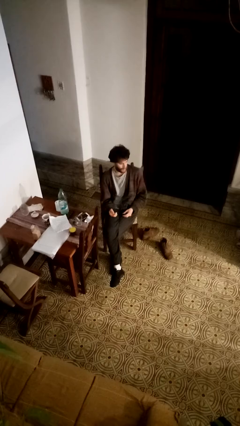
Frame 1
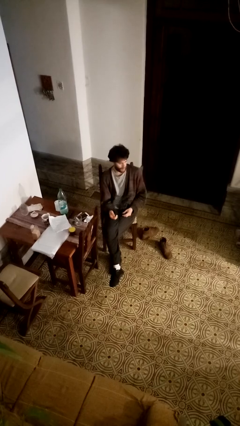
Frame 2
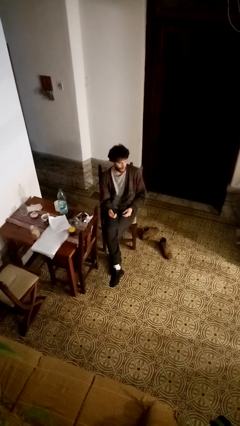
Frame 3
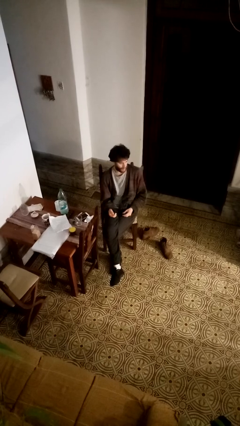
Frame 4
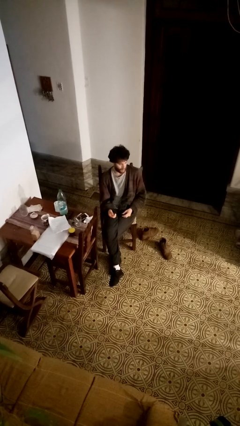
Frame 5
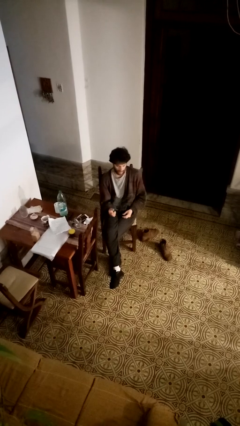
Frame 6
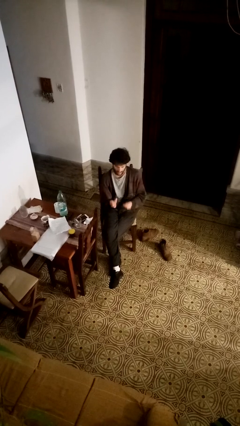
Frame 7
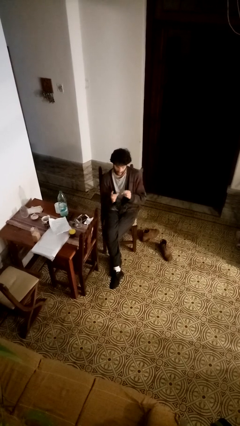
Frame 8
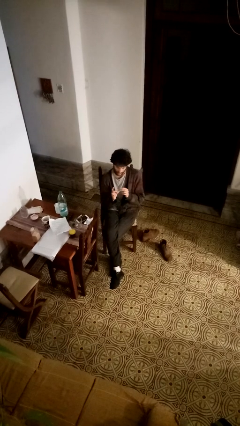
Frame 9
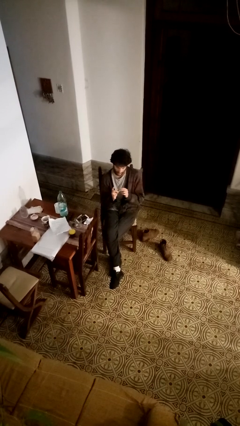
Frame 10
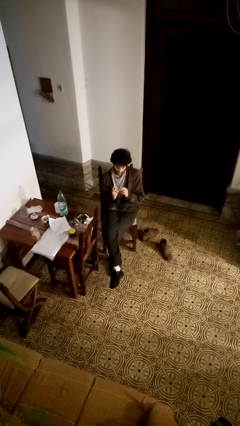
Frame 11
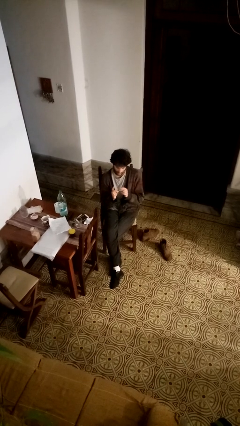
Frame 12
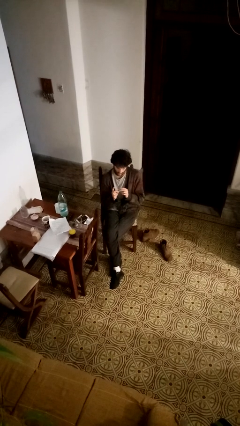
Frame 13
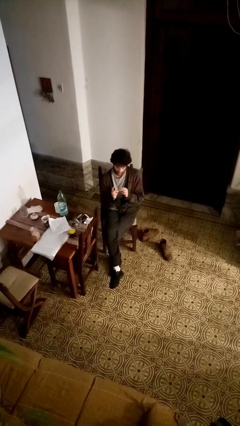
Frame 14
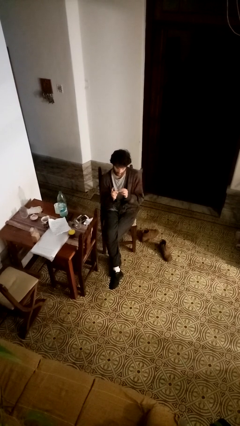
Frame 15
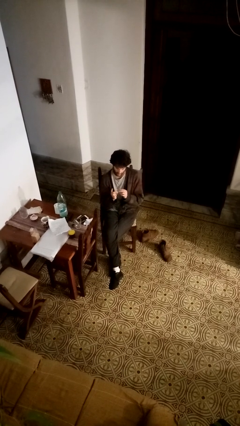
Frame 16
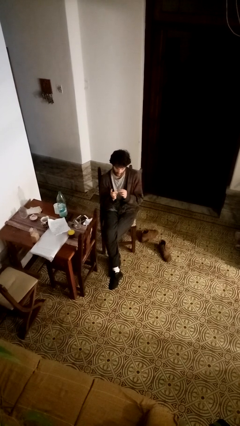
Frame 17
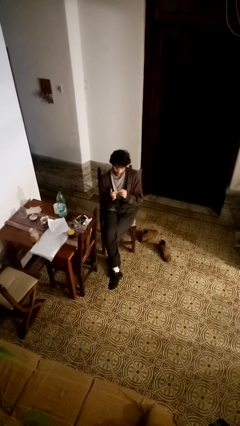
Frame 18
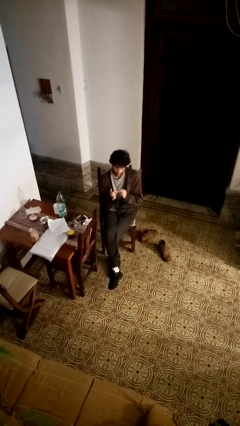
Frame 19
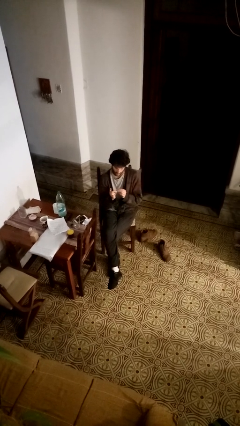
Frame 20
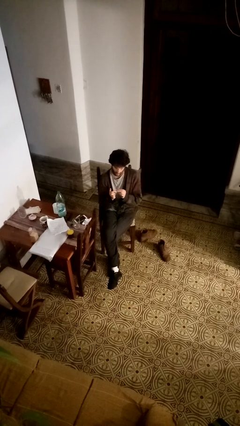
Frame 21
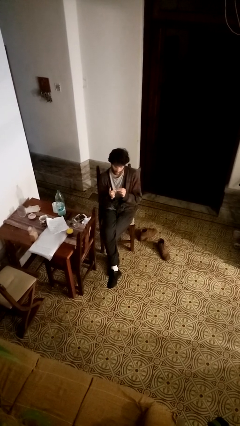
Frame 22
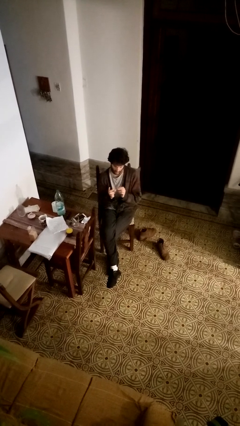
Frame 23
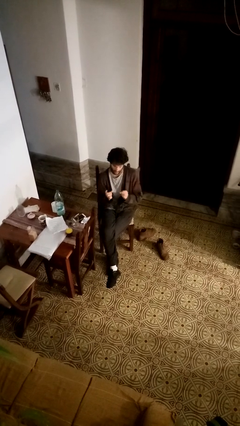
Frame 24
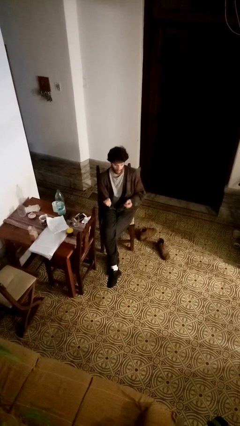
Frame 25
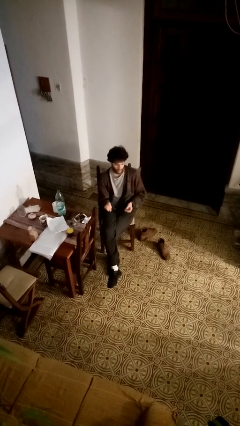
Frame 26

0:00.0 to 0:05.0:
person clips fingernails

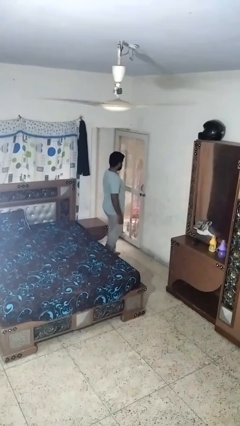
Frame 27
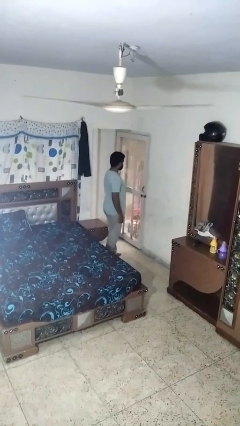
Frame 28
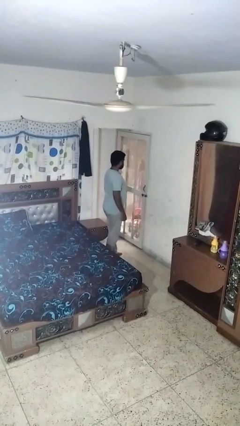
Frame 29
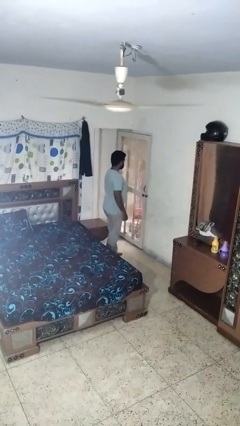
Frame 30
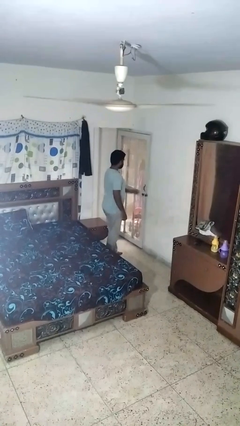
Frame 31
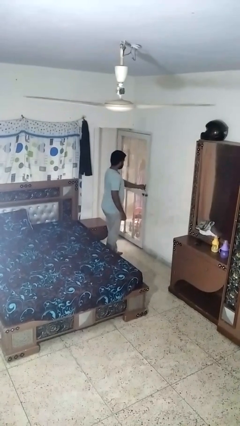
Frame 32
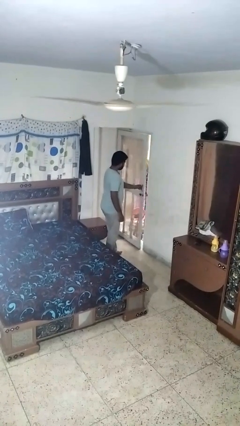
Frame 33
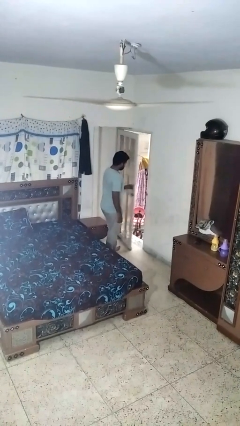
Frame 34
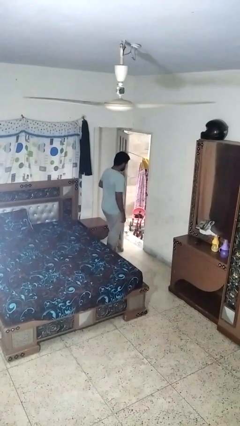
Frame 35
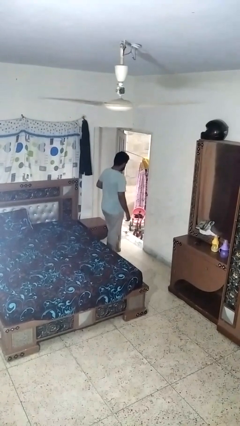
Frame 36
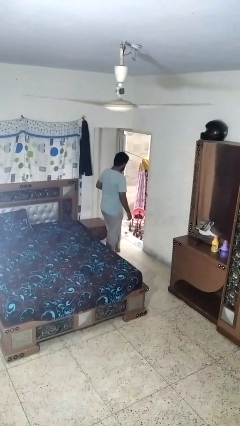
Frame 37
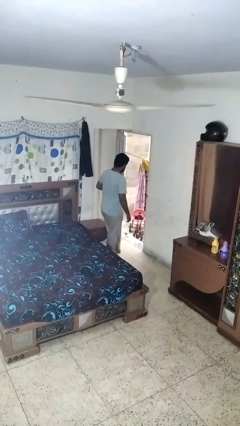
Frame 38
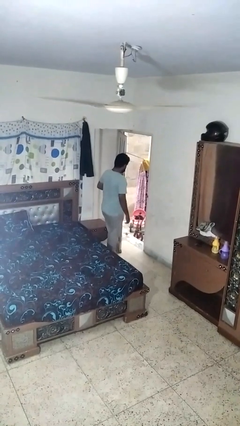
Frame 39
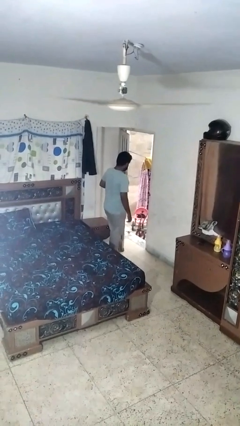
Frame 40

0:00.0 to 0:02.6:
person opens facility door

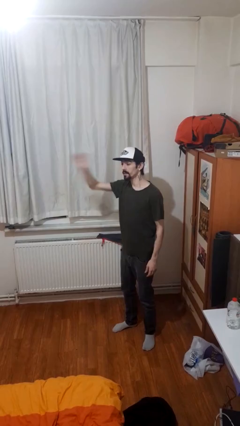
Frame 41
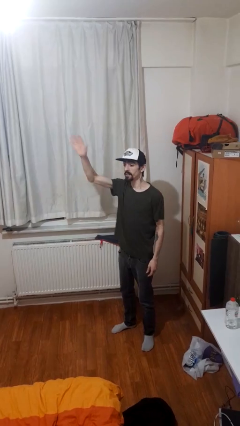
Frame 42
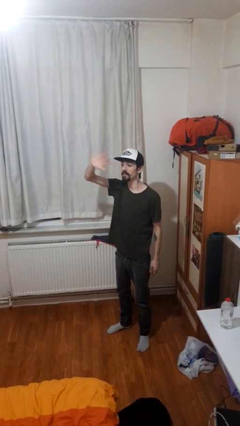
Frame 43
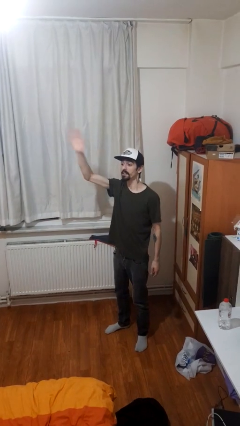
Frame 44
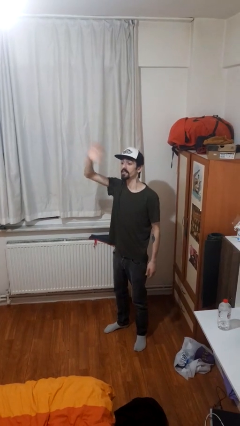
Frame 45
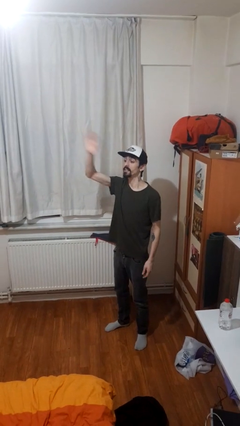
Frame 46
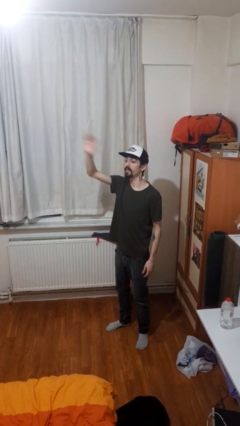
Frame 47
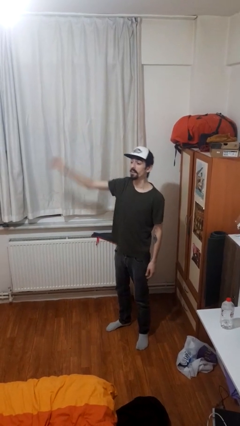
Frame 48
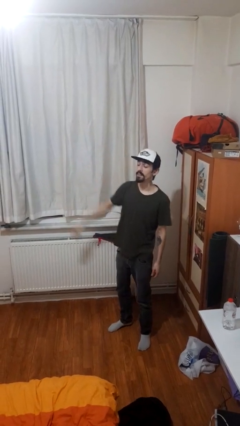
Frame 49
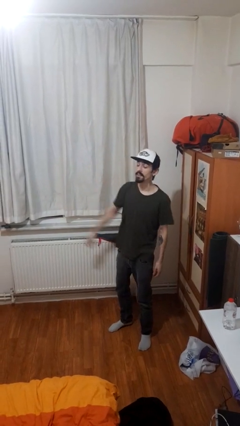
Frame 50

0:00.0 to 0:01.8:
person waves at person

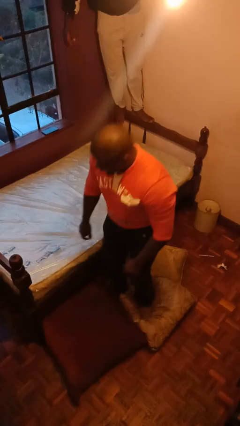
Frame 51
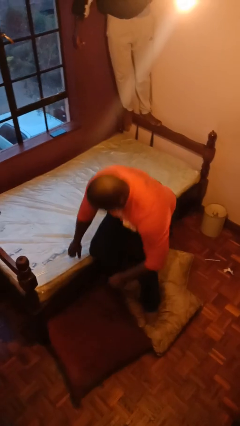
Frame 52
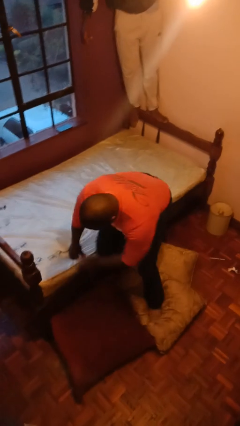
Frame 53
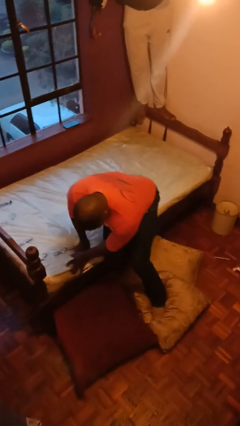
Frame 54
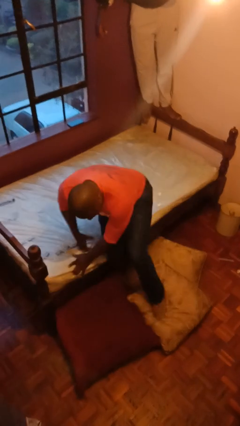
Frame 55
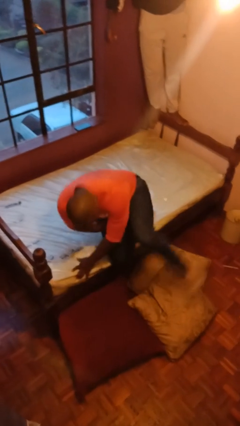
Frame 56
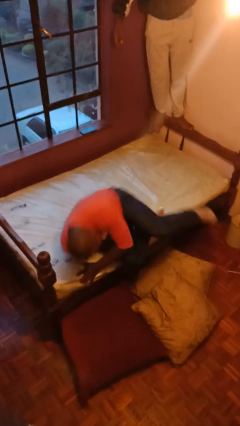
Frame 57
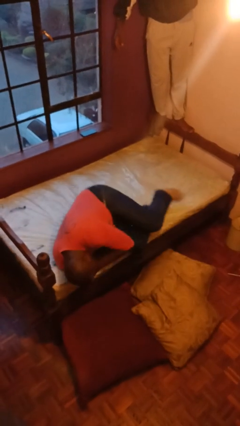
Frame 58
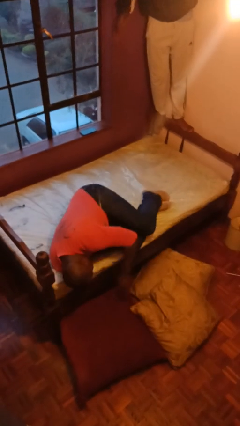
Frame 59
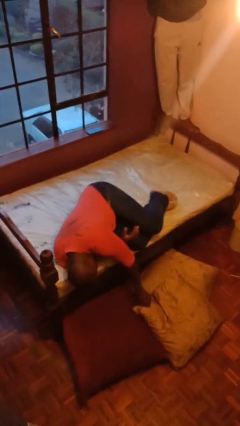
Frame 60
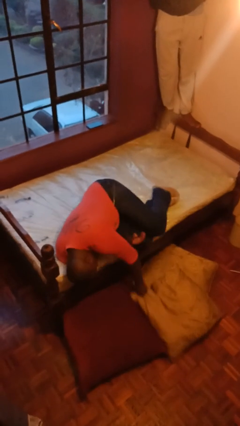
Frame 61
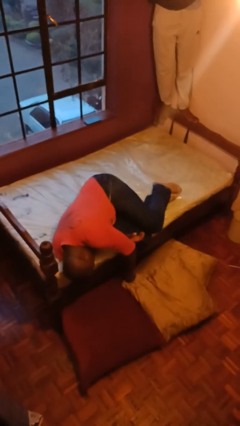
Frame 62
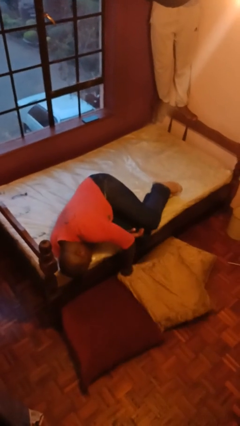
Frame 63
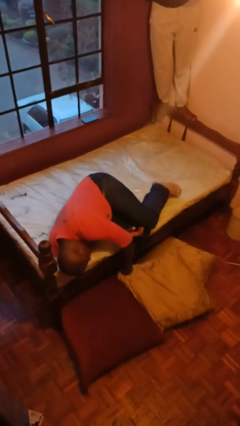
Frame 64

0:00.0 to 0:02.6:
person lies down on bed

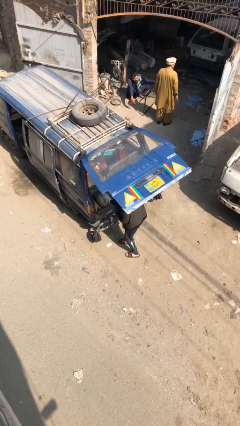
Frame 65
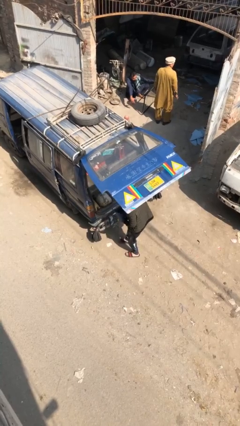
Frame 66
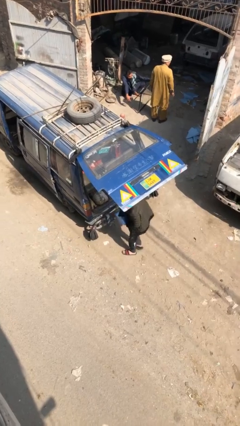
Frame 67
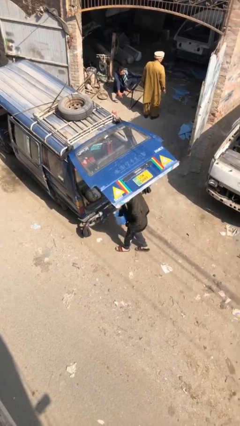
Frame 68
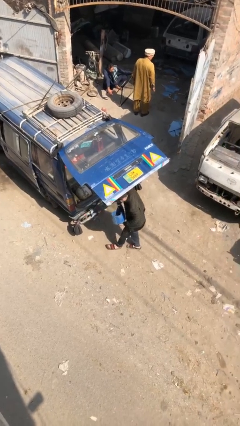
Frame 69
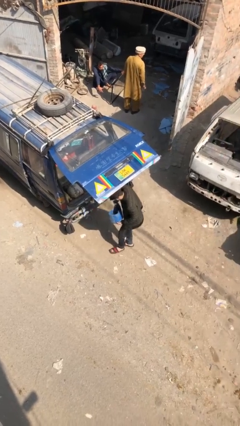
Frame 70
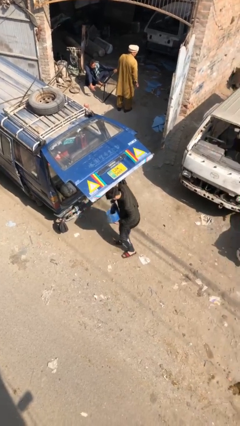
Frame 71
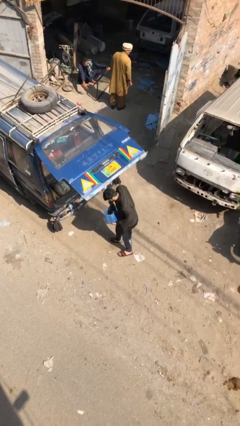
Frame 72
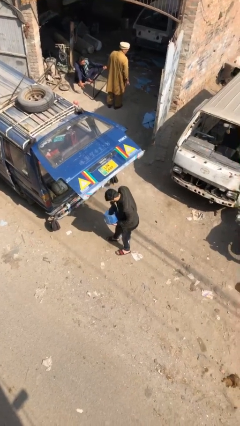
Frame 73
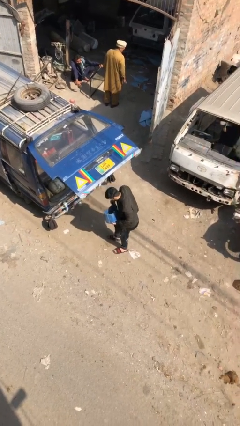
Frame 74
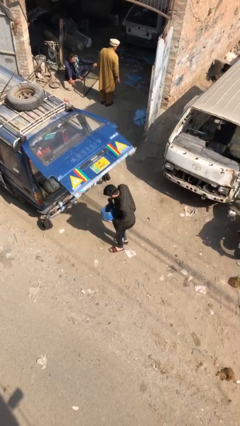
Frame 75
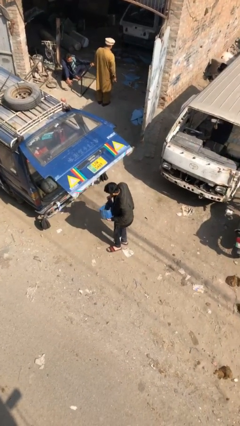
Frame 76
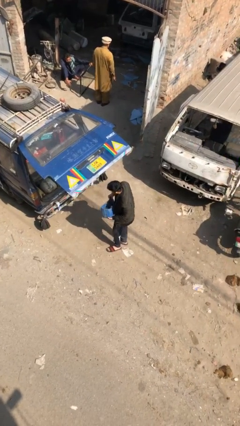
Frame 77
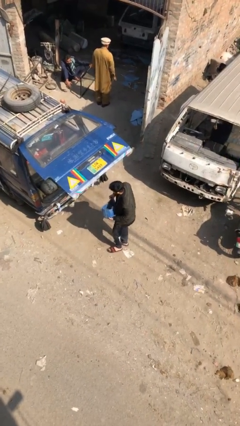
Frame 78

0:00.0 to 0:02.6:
person unloads car

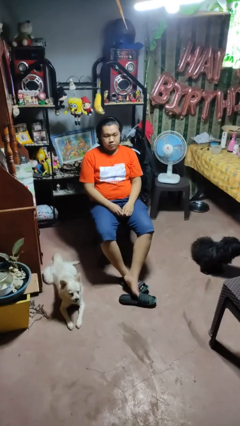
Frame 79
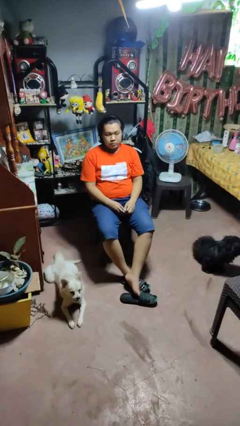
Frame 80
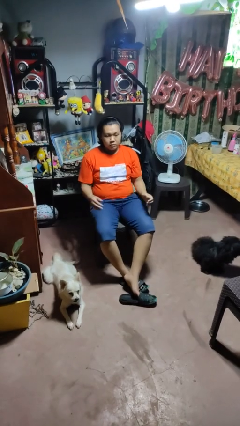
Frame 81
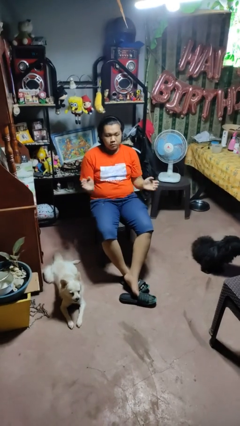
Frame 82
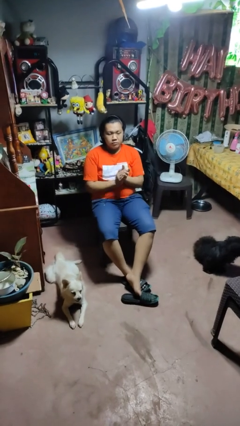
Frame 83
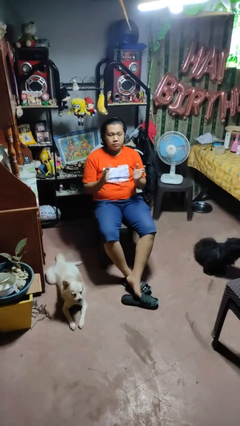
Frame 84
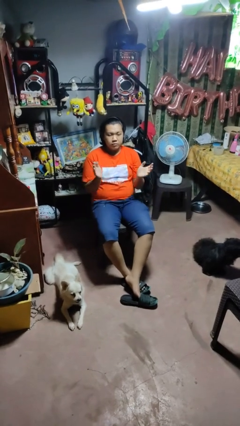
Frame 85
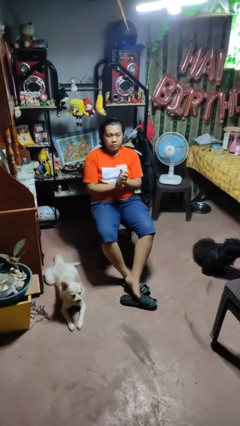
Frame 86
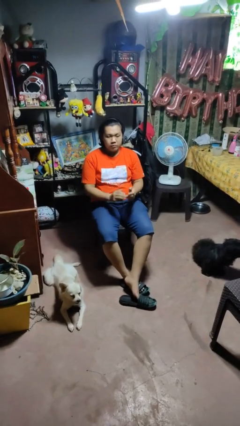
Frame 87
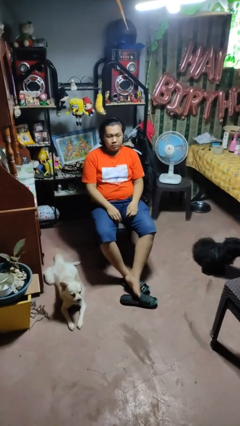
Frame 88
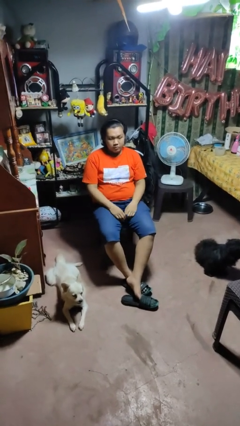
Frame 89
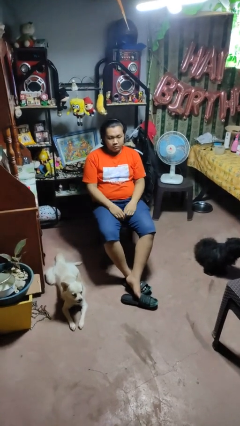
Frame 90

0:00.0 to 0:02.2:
person claps hands

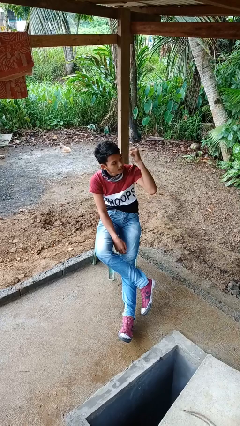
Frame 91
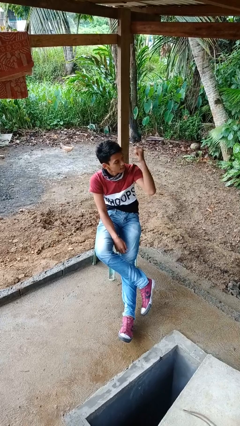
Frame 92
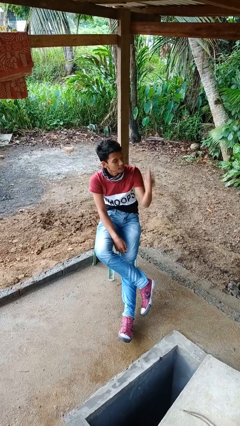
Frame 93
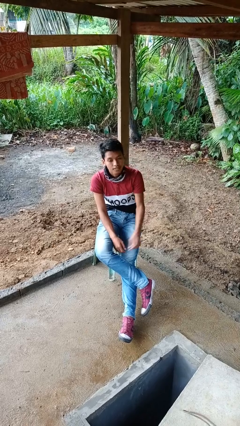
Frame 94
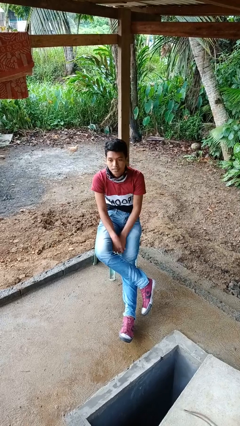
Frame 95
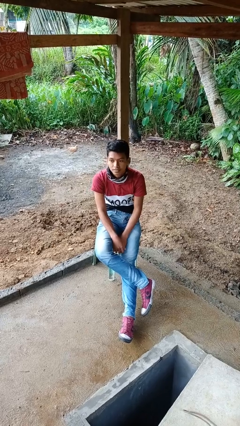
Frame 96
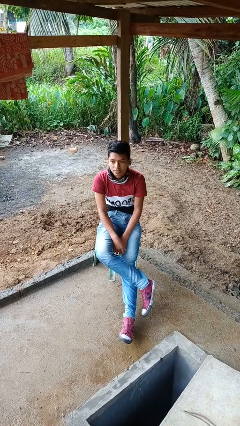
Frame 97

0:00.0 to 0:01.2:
person gestures behind me
